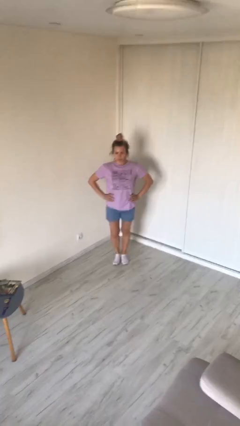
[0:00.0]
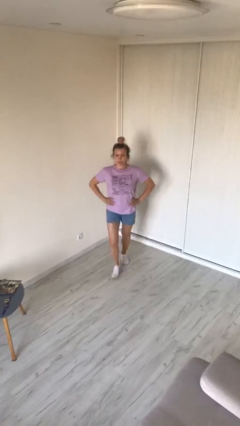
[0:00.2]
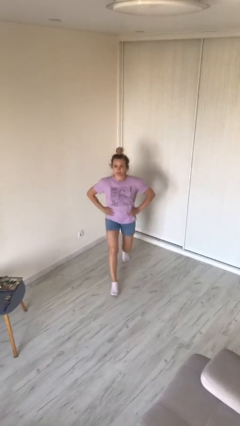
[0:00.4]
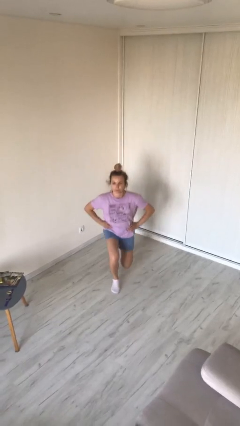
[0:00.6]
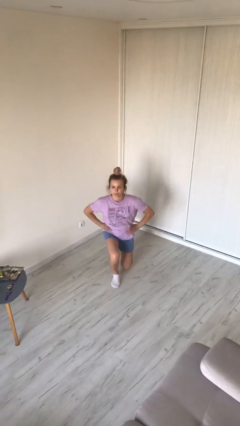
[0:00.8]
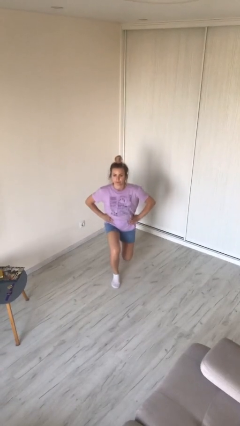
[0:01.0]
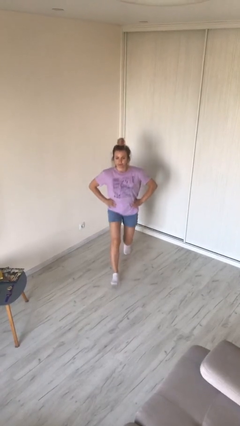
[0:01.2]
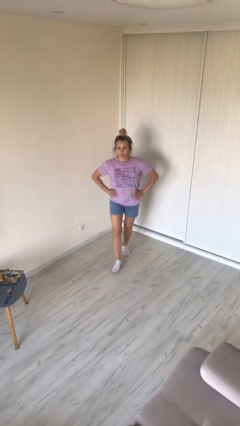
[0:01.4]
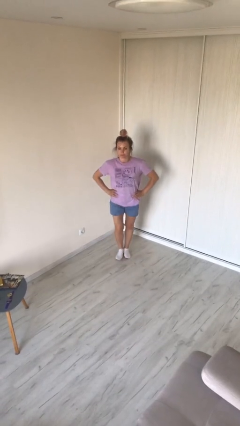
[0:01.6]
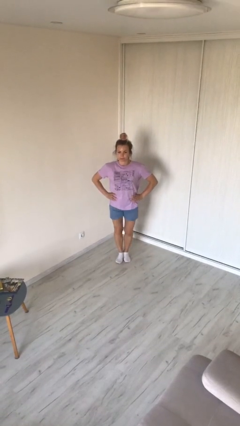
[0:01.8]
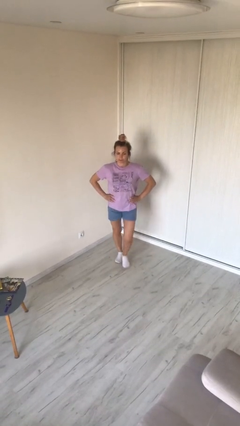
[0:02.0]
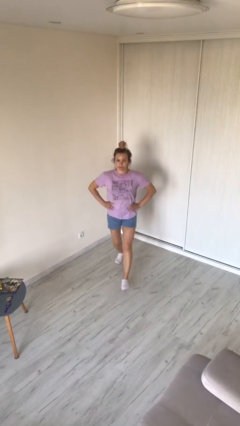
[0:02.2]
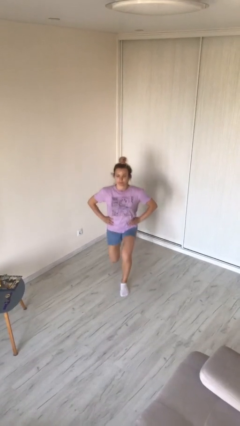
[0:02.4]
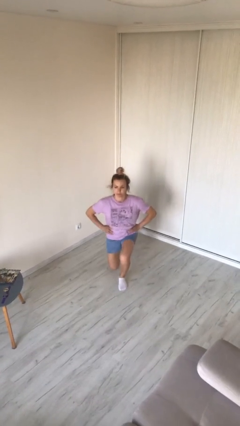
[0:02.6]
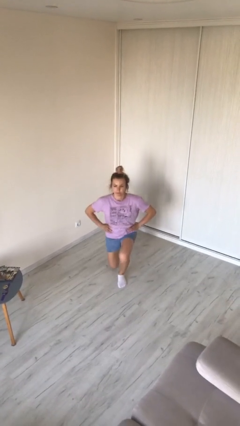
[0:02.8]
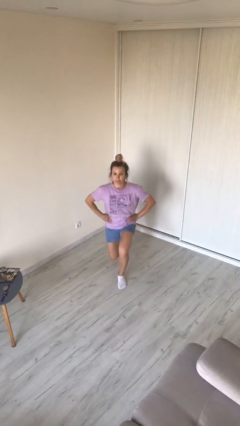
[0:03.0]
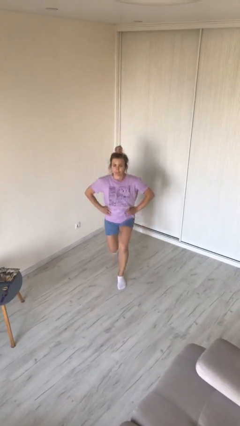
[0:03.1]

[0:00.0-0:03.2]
person exercises with lunges

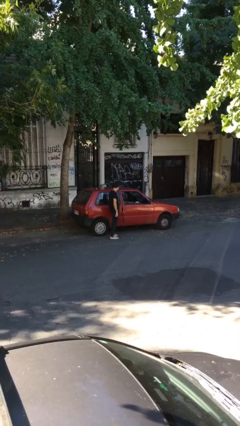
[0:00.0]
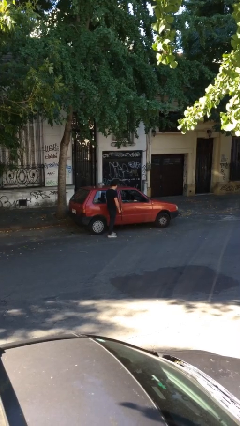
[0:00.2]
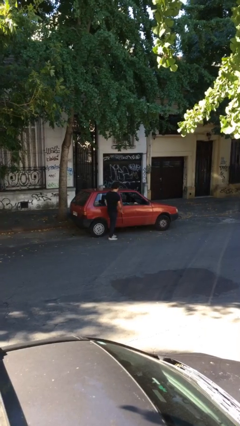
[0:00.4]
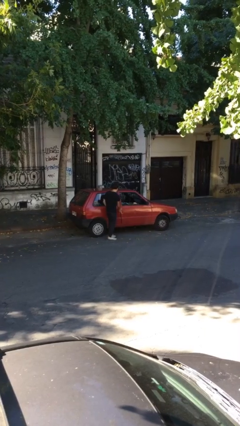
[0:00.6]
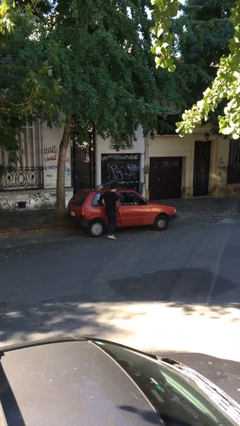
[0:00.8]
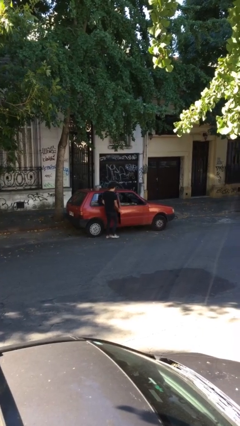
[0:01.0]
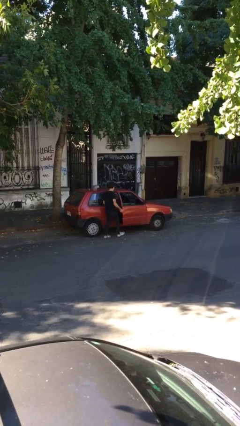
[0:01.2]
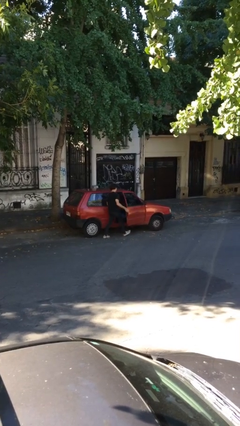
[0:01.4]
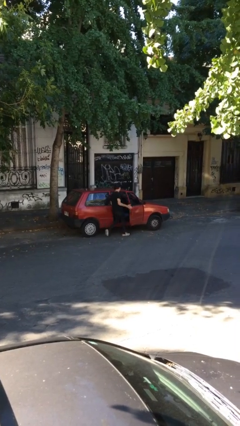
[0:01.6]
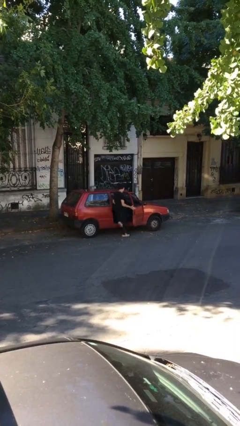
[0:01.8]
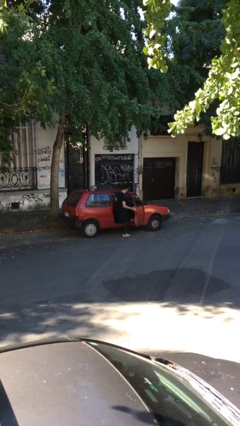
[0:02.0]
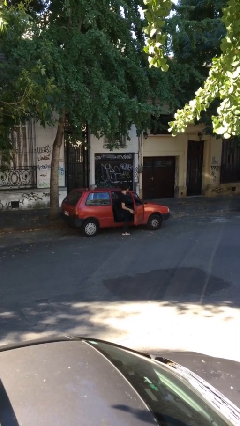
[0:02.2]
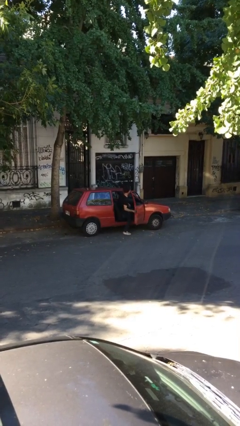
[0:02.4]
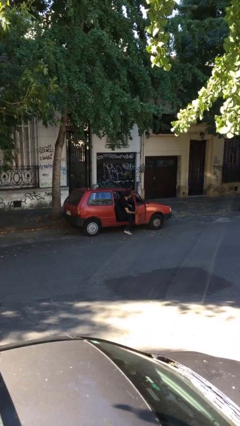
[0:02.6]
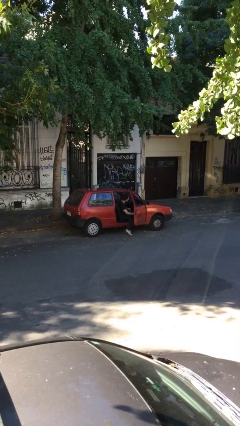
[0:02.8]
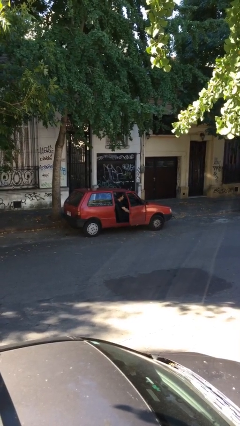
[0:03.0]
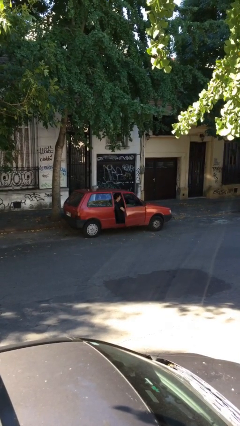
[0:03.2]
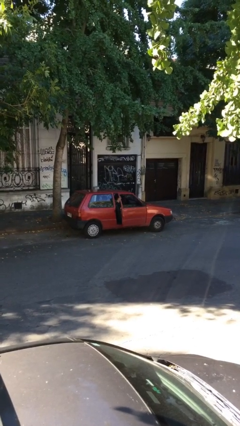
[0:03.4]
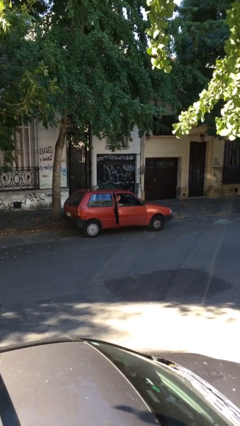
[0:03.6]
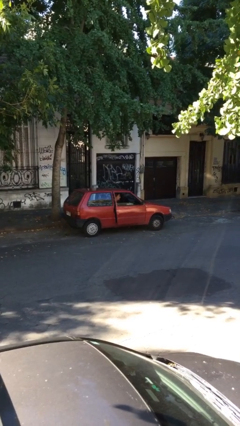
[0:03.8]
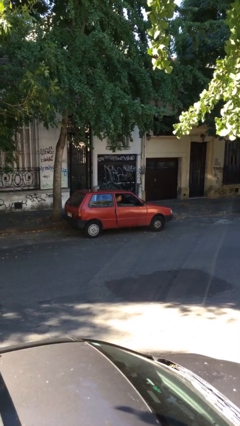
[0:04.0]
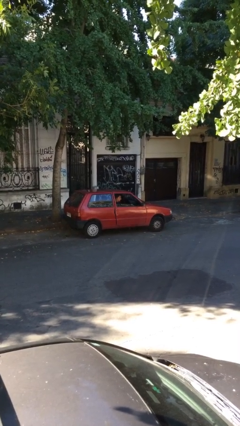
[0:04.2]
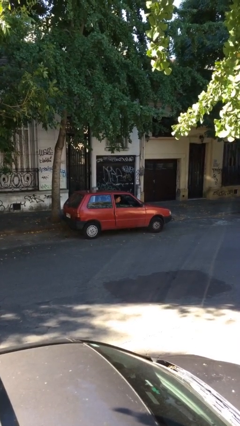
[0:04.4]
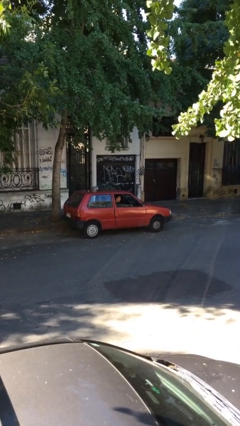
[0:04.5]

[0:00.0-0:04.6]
car picks up person

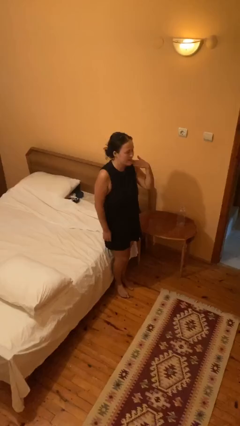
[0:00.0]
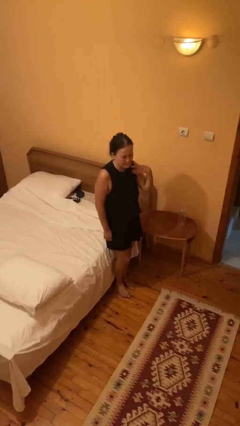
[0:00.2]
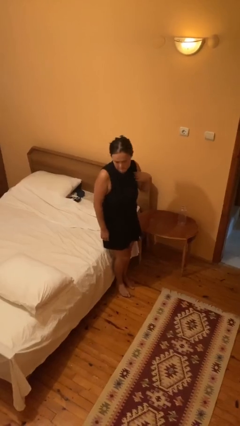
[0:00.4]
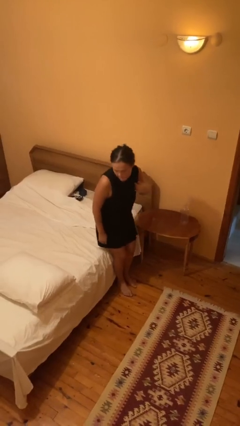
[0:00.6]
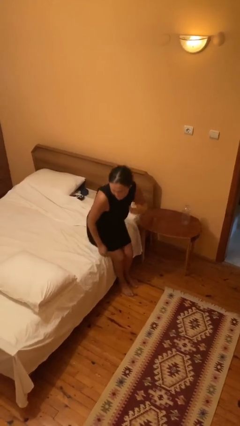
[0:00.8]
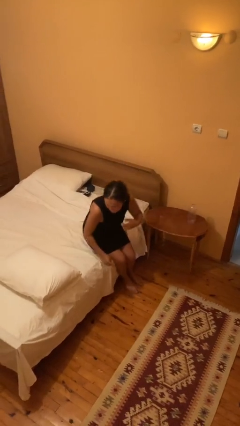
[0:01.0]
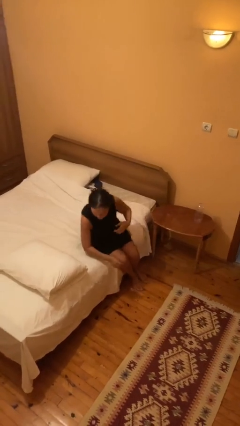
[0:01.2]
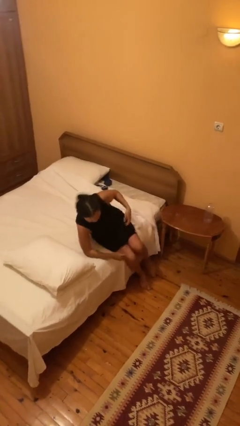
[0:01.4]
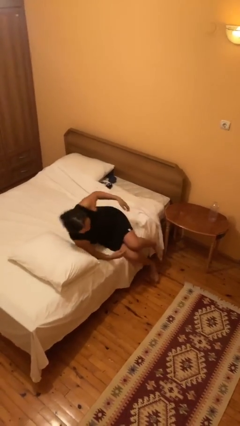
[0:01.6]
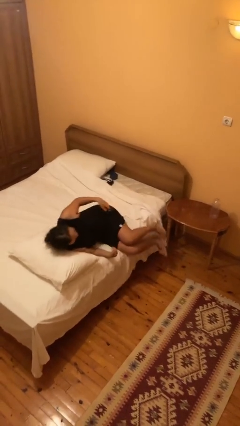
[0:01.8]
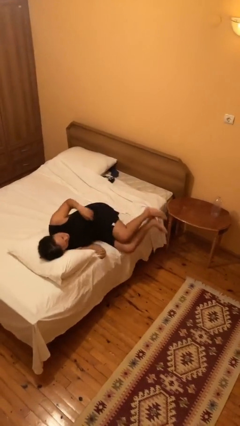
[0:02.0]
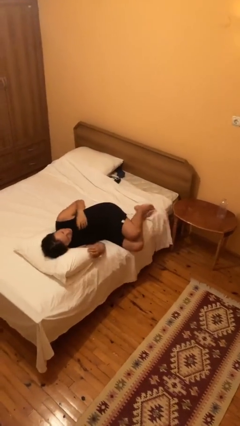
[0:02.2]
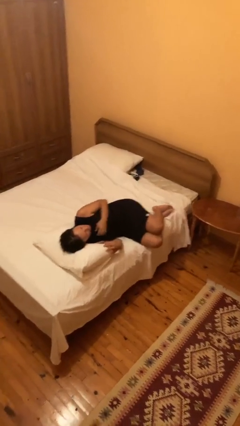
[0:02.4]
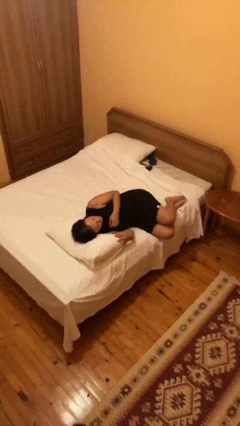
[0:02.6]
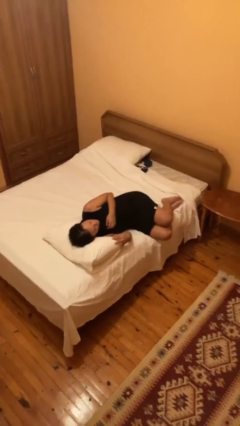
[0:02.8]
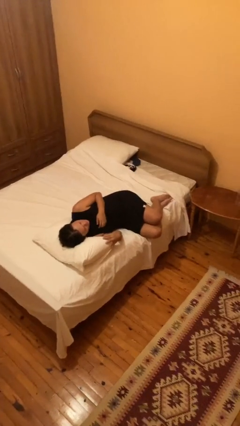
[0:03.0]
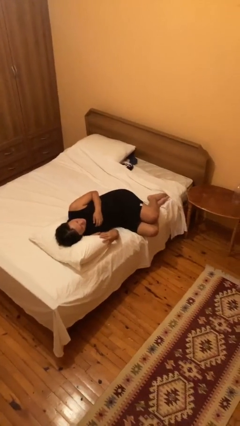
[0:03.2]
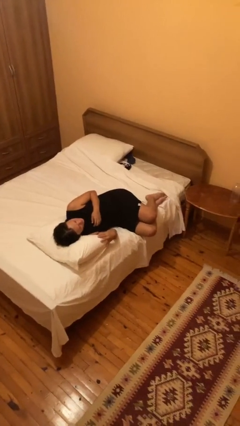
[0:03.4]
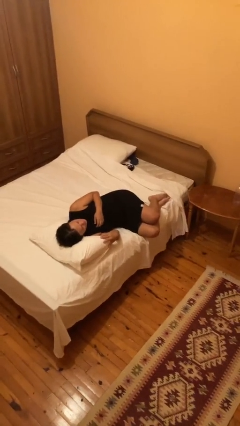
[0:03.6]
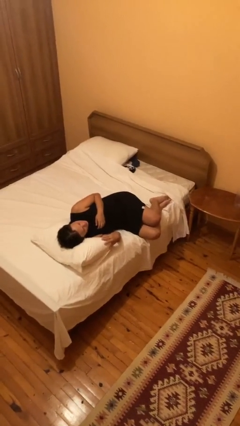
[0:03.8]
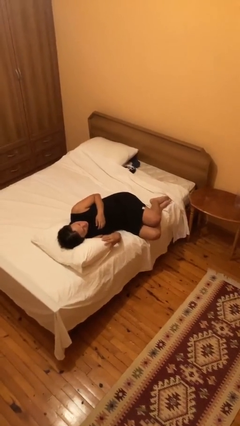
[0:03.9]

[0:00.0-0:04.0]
person lies down on bed

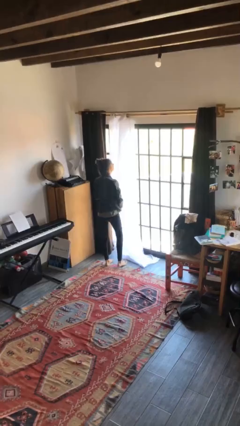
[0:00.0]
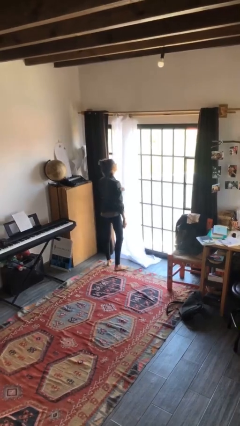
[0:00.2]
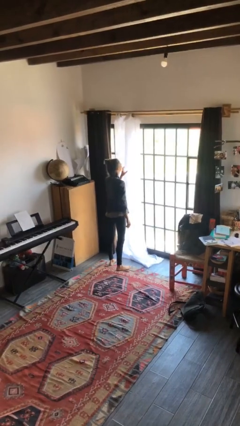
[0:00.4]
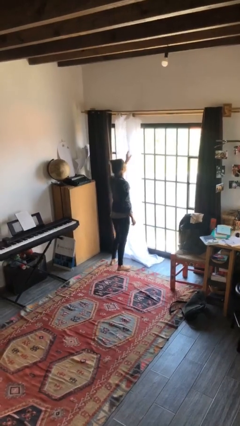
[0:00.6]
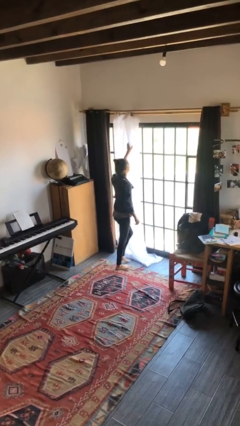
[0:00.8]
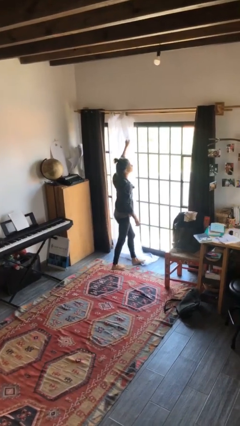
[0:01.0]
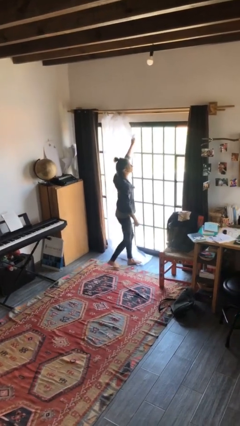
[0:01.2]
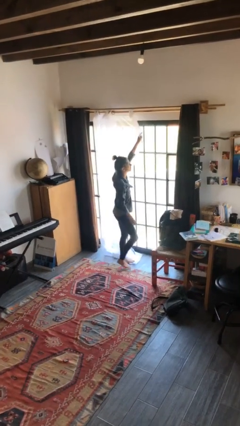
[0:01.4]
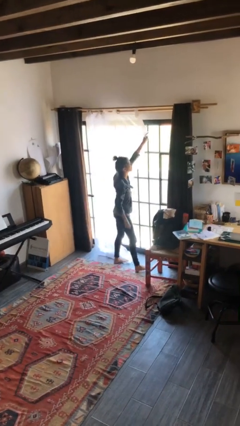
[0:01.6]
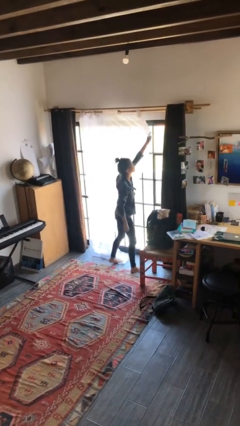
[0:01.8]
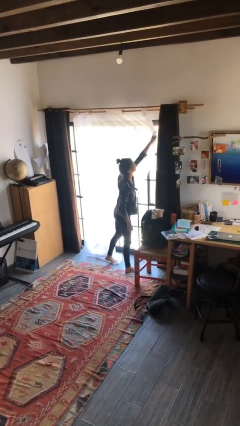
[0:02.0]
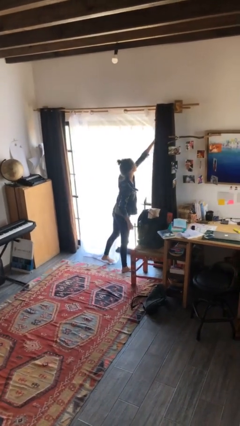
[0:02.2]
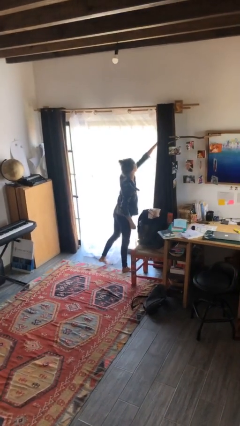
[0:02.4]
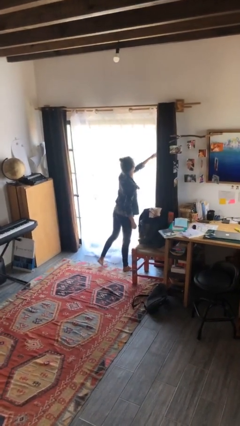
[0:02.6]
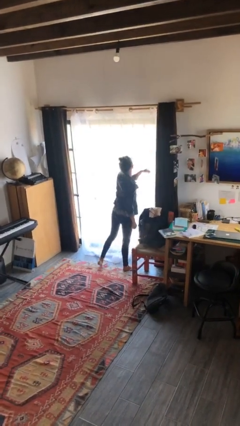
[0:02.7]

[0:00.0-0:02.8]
person closes curtains

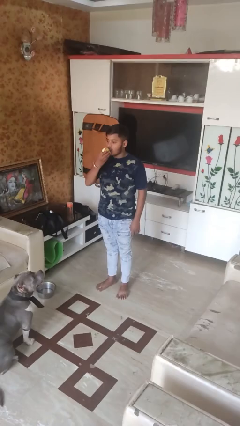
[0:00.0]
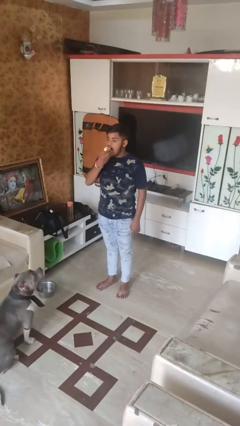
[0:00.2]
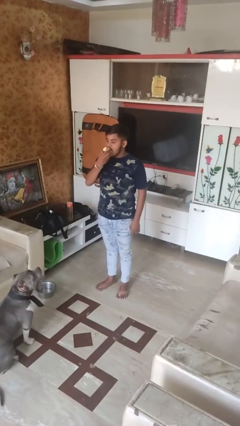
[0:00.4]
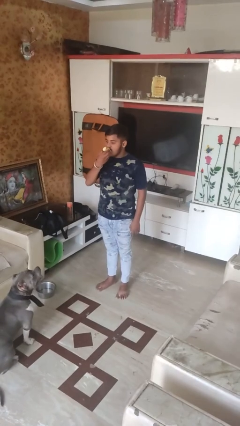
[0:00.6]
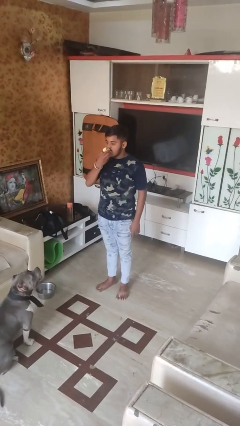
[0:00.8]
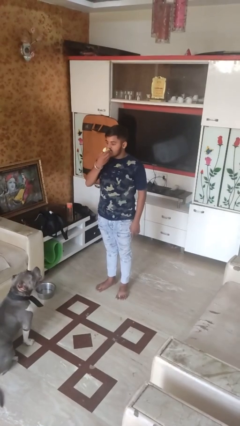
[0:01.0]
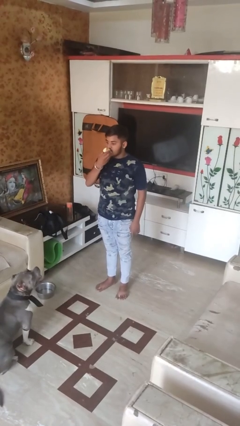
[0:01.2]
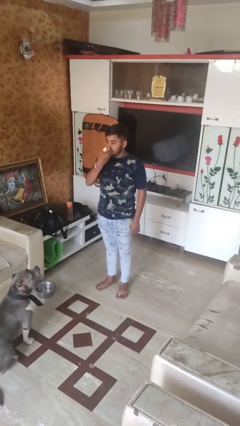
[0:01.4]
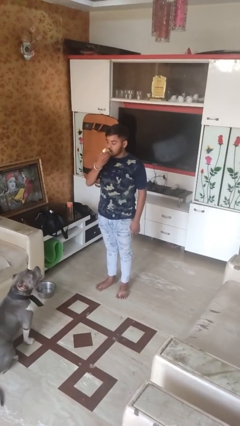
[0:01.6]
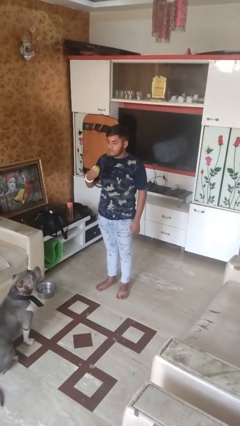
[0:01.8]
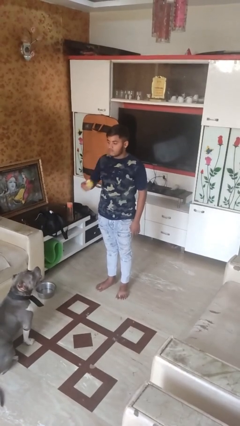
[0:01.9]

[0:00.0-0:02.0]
person eats apple

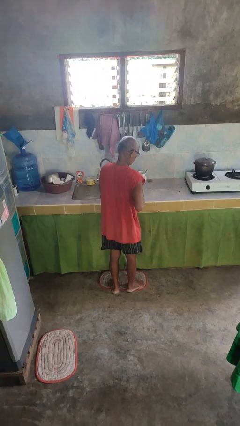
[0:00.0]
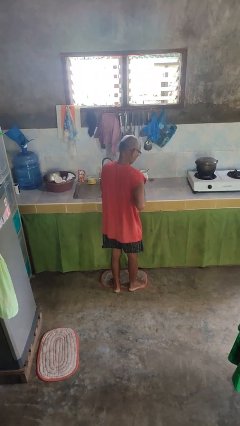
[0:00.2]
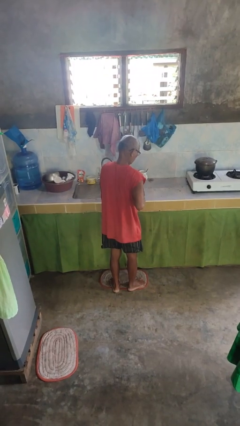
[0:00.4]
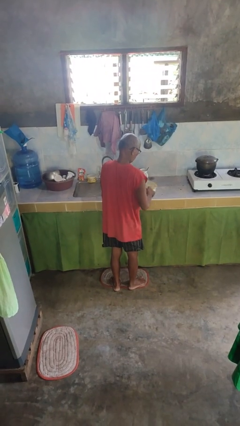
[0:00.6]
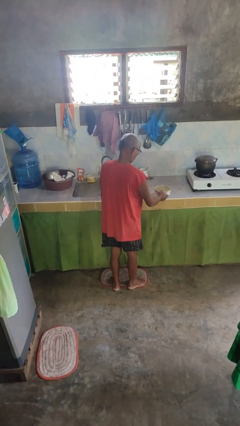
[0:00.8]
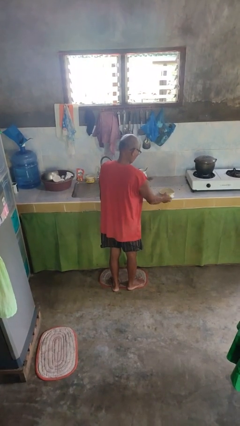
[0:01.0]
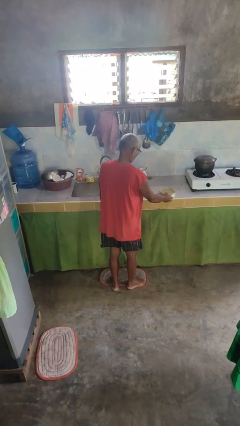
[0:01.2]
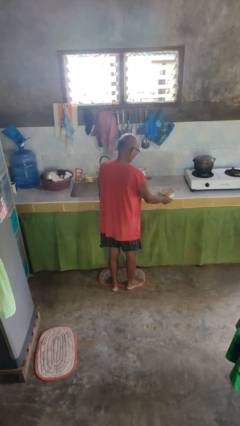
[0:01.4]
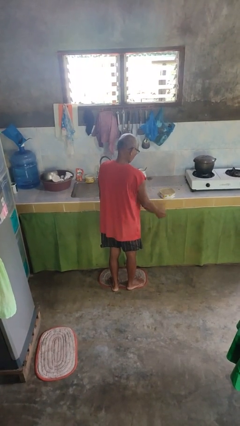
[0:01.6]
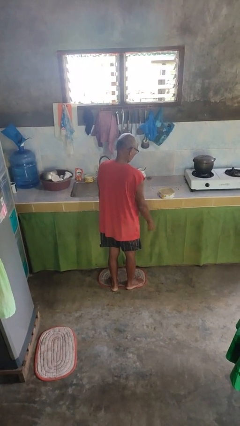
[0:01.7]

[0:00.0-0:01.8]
person puts down object on countertop
